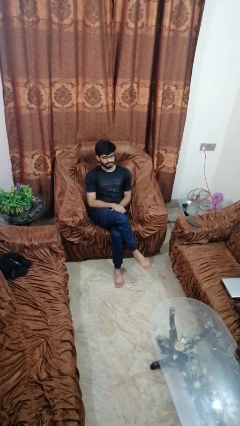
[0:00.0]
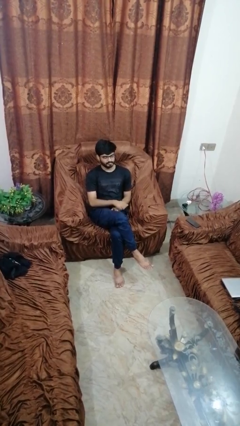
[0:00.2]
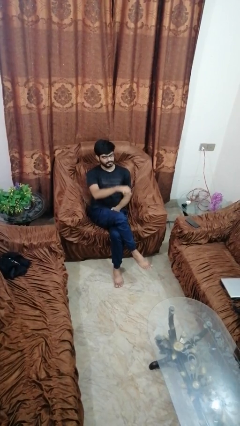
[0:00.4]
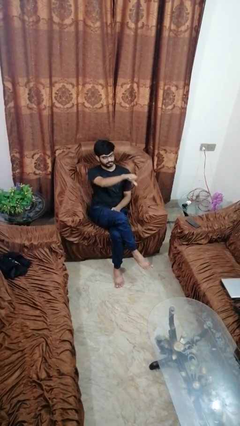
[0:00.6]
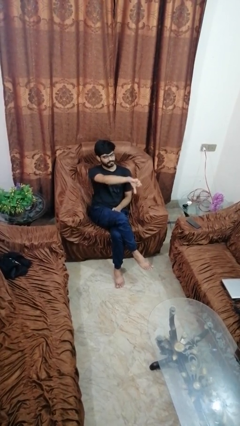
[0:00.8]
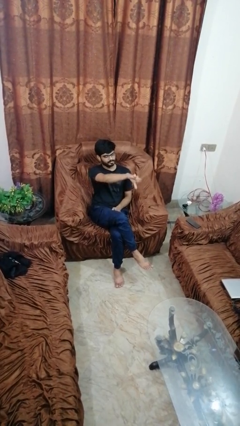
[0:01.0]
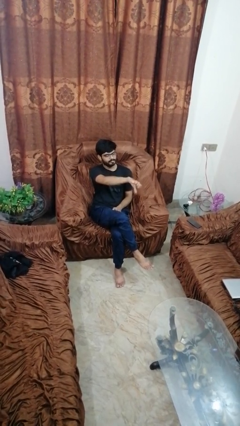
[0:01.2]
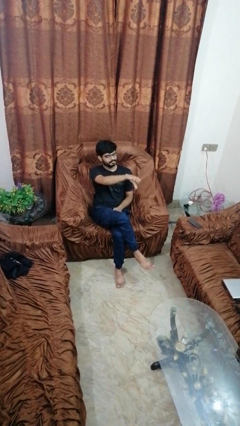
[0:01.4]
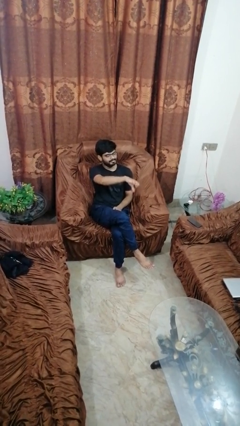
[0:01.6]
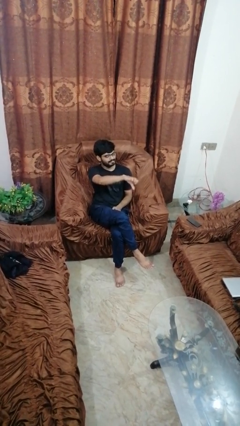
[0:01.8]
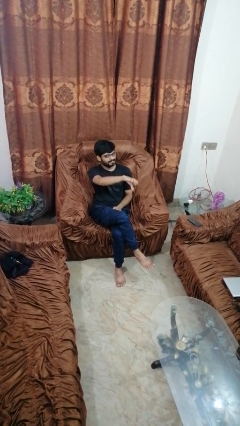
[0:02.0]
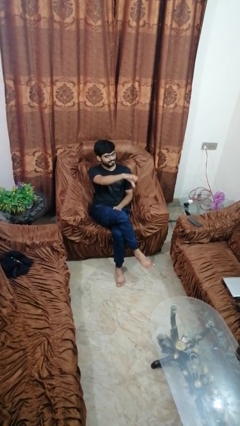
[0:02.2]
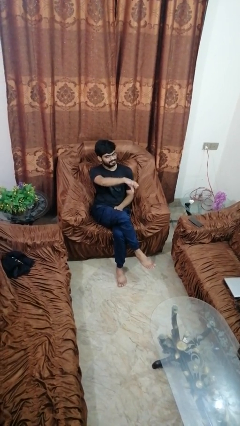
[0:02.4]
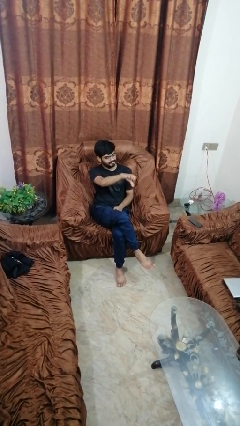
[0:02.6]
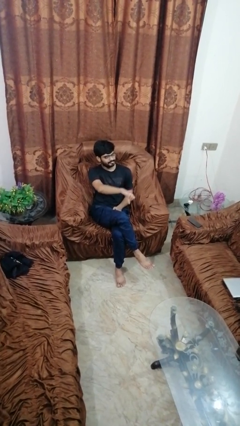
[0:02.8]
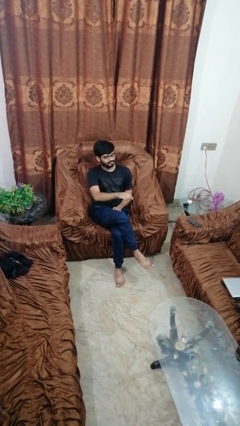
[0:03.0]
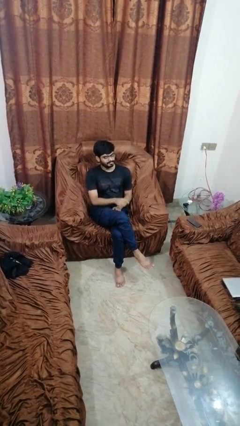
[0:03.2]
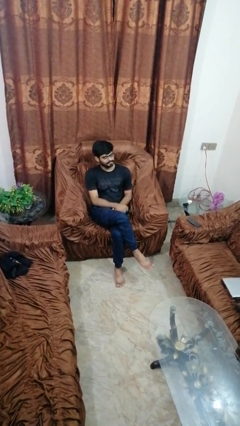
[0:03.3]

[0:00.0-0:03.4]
person gestures thumbs down

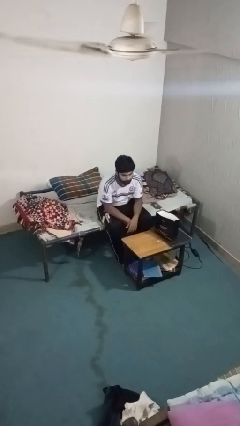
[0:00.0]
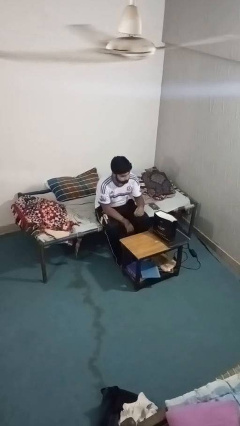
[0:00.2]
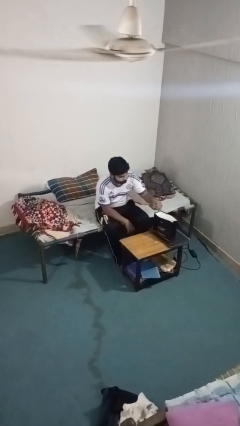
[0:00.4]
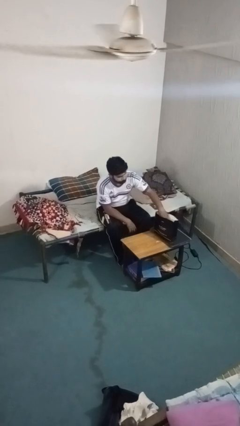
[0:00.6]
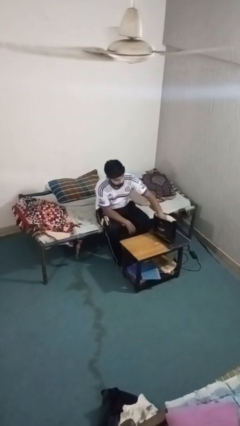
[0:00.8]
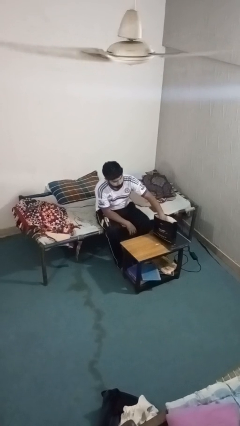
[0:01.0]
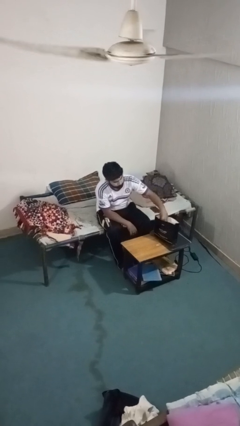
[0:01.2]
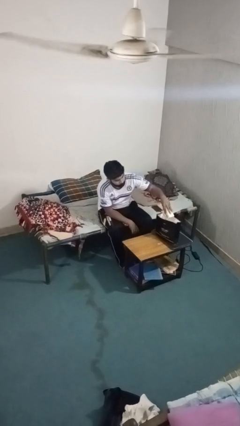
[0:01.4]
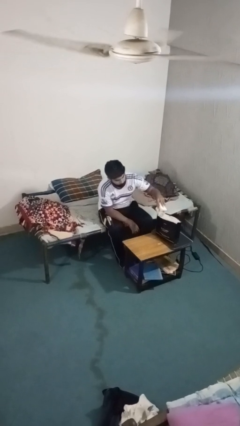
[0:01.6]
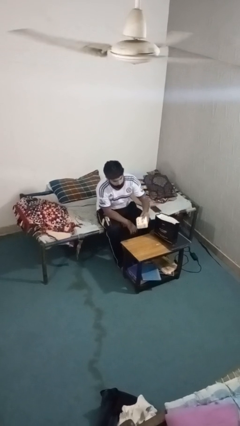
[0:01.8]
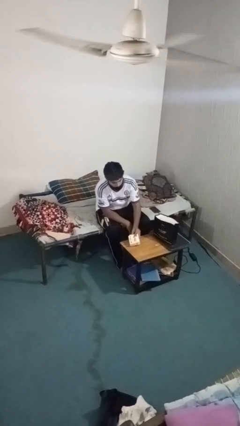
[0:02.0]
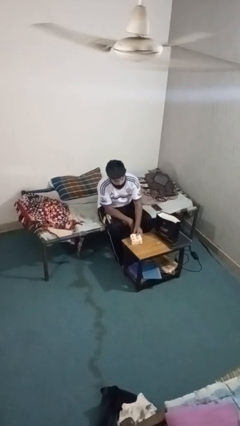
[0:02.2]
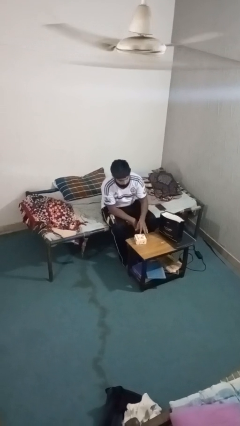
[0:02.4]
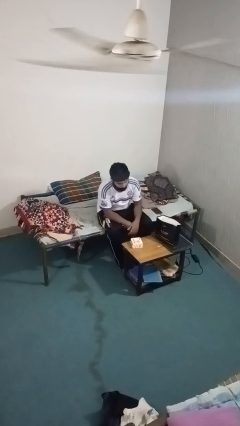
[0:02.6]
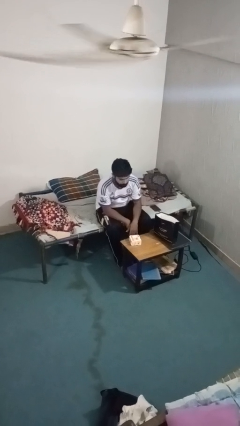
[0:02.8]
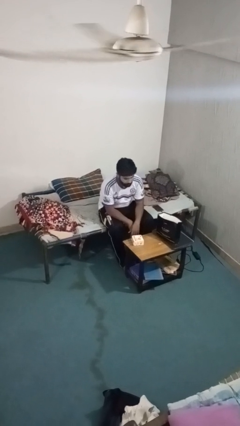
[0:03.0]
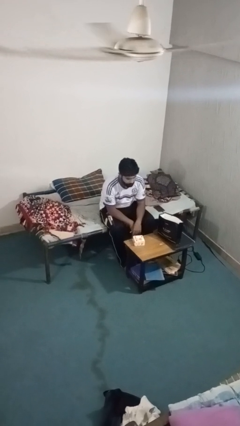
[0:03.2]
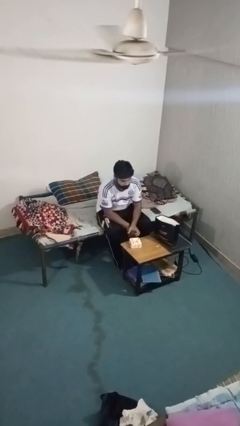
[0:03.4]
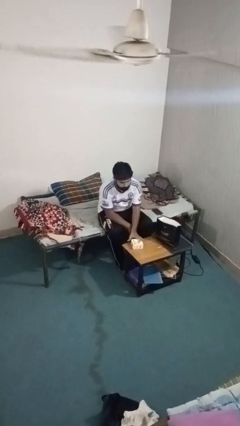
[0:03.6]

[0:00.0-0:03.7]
person takes object from bag

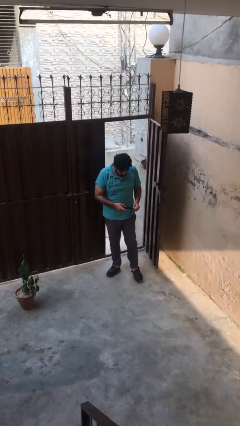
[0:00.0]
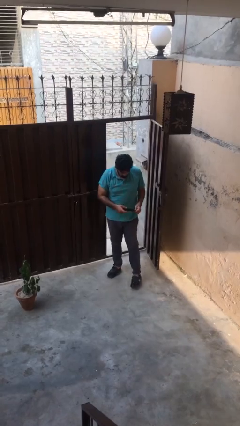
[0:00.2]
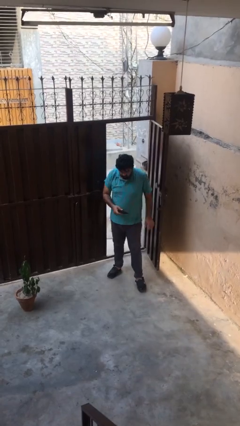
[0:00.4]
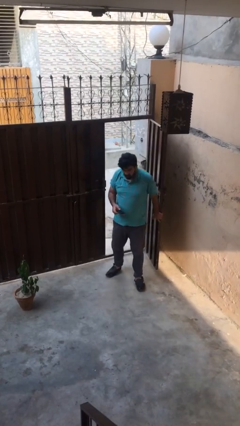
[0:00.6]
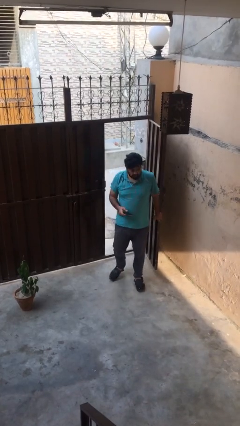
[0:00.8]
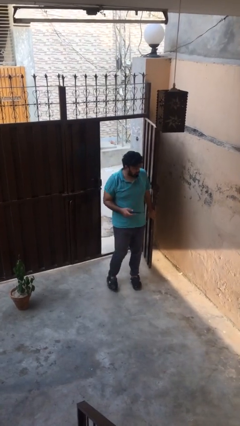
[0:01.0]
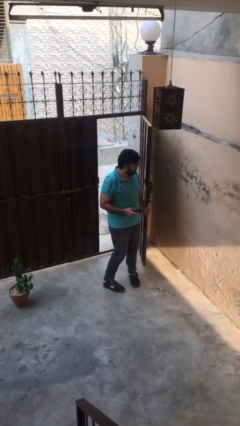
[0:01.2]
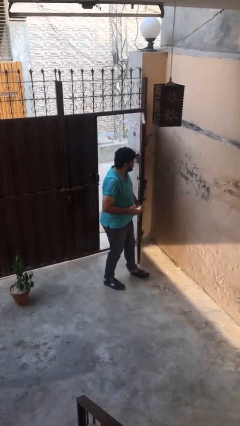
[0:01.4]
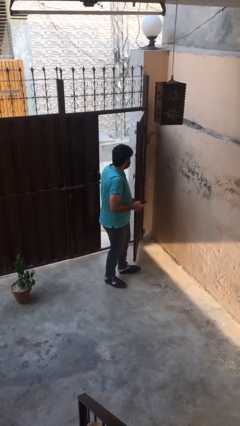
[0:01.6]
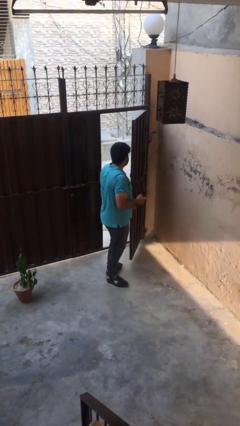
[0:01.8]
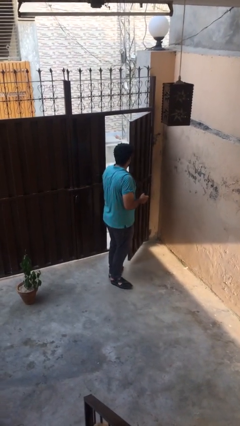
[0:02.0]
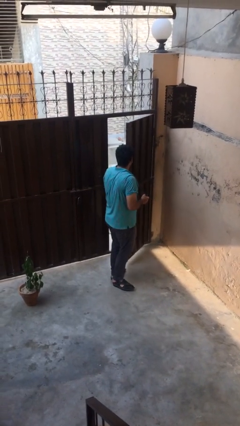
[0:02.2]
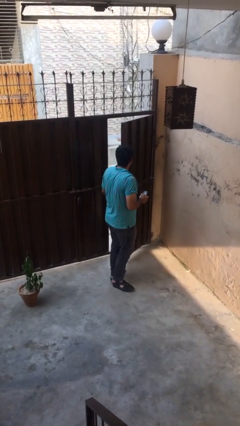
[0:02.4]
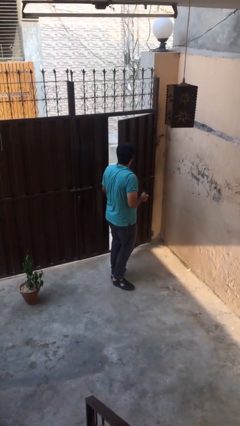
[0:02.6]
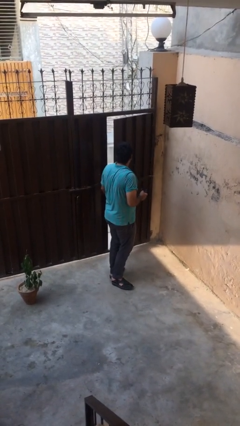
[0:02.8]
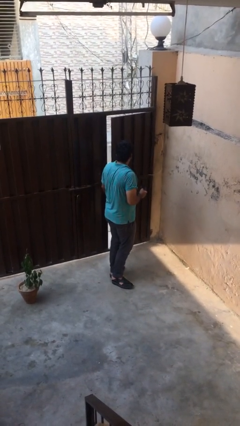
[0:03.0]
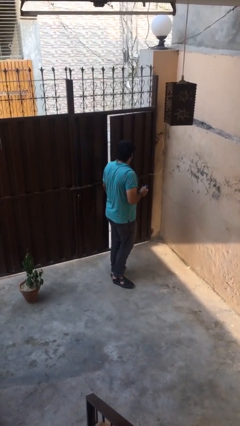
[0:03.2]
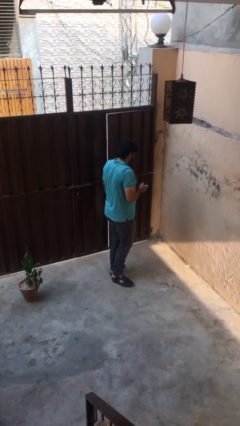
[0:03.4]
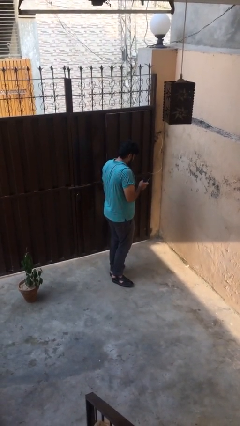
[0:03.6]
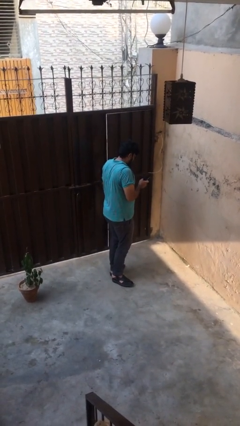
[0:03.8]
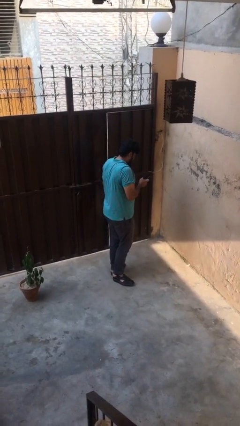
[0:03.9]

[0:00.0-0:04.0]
person closes facility door

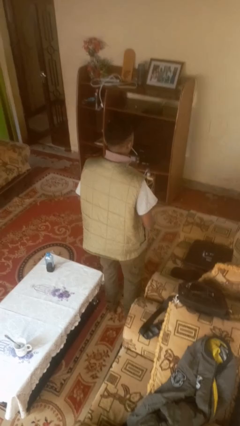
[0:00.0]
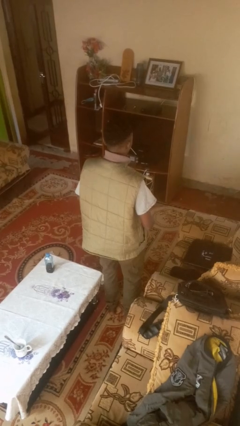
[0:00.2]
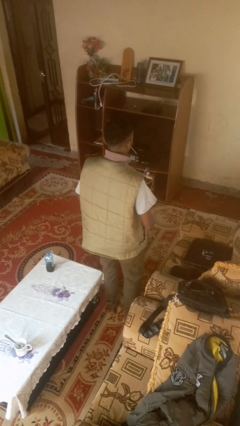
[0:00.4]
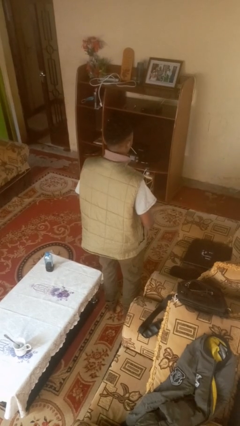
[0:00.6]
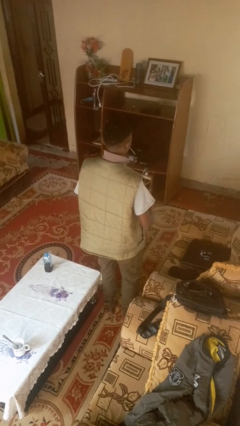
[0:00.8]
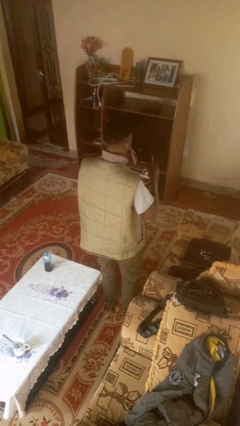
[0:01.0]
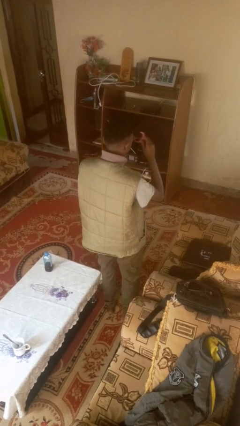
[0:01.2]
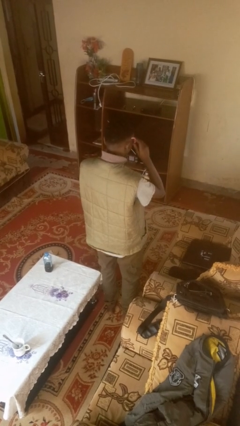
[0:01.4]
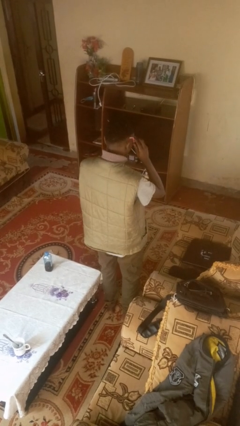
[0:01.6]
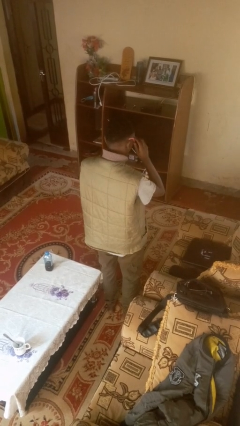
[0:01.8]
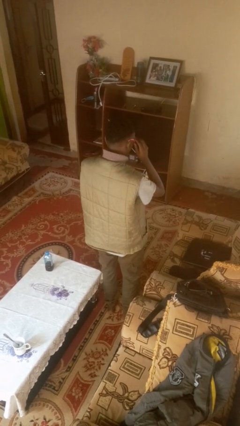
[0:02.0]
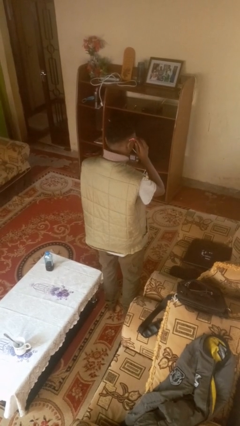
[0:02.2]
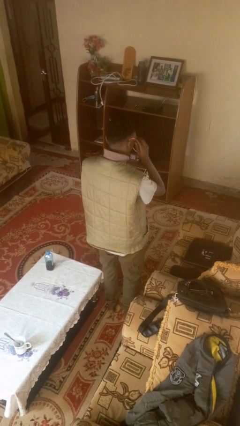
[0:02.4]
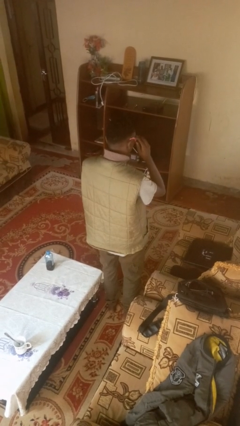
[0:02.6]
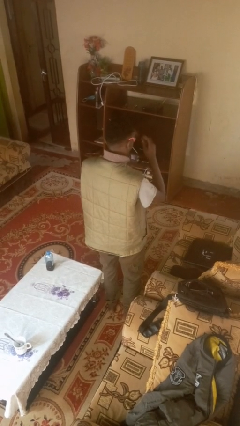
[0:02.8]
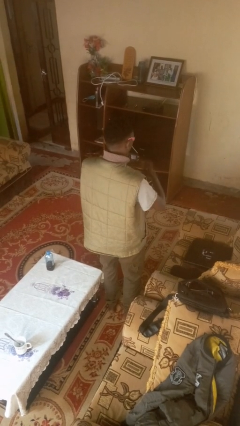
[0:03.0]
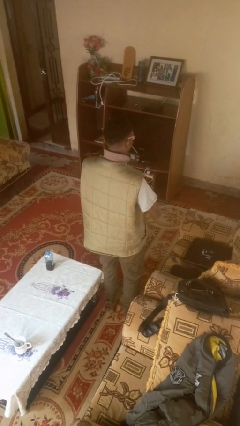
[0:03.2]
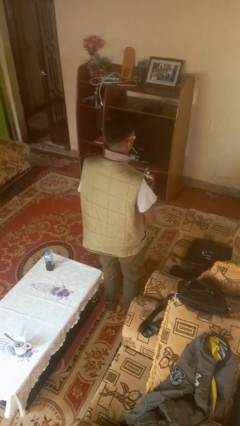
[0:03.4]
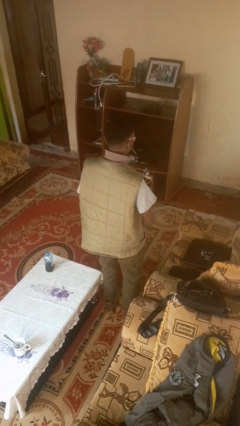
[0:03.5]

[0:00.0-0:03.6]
person puts on sunglasses

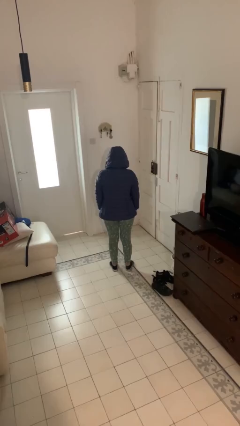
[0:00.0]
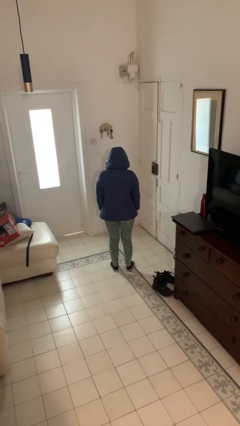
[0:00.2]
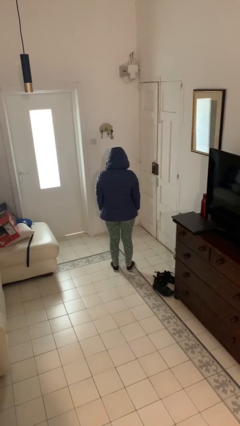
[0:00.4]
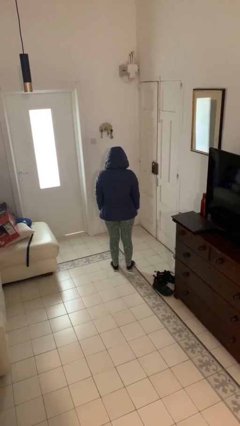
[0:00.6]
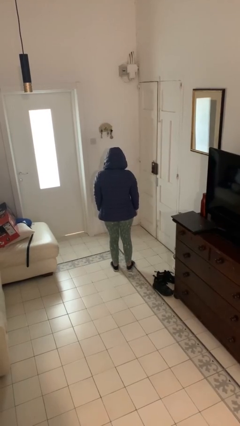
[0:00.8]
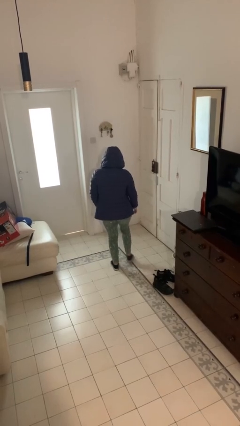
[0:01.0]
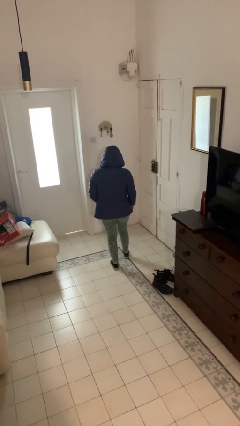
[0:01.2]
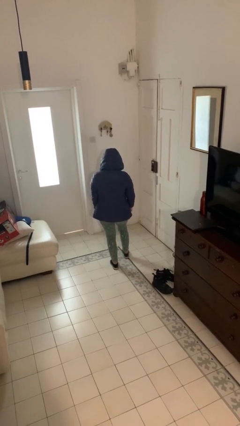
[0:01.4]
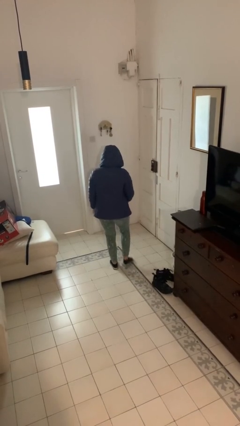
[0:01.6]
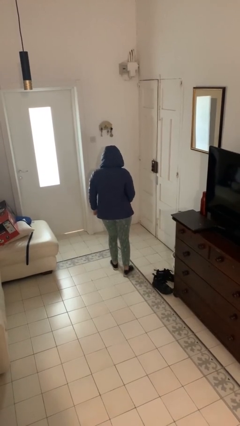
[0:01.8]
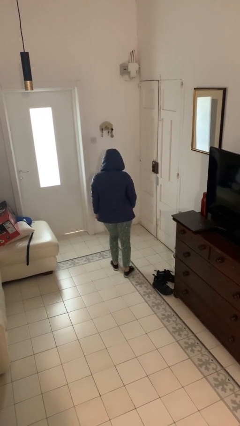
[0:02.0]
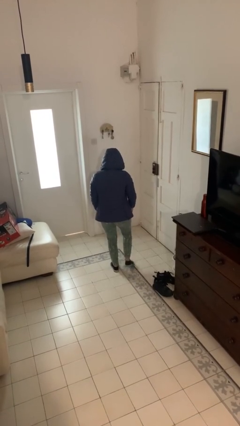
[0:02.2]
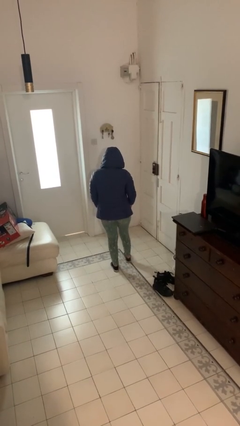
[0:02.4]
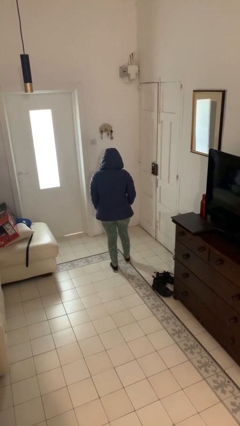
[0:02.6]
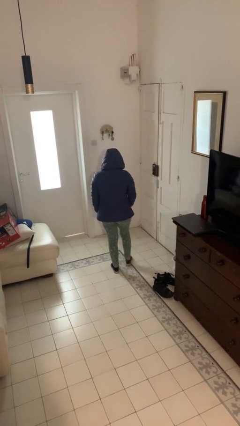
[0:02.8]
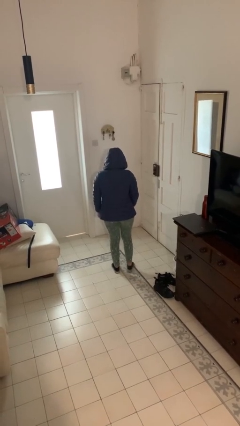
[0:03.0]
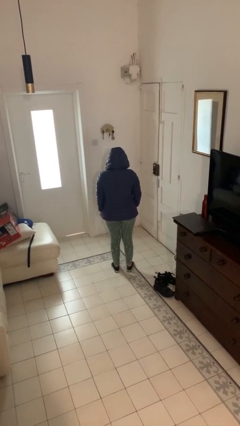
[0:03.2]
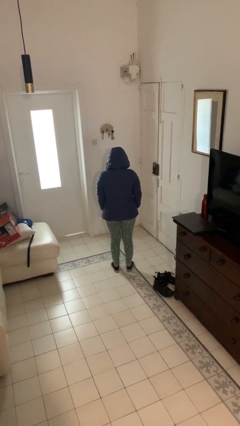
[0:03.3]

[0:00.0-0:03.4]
person dances in place
